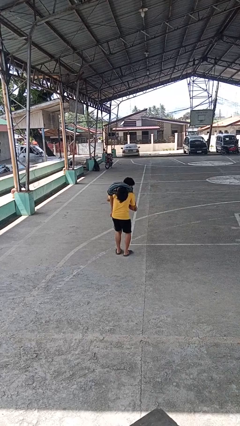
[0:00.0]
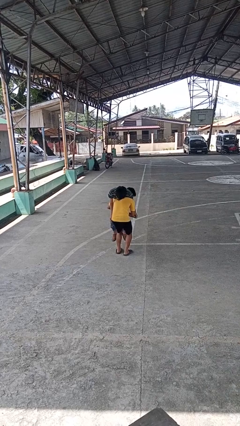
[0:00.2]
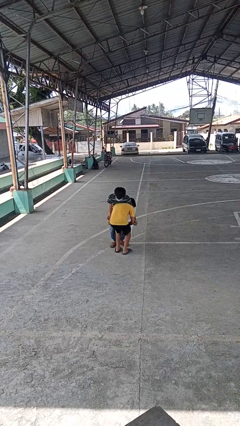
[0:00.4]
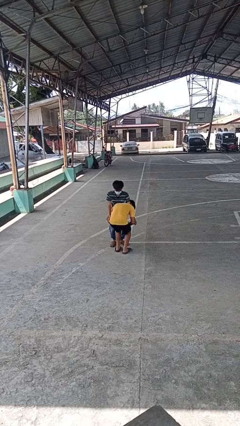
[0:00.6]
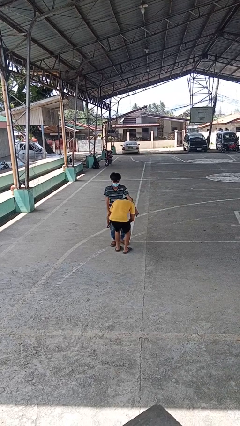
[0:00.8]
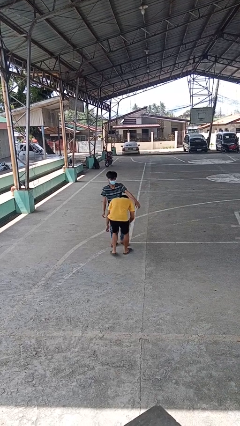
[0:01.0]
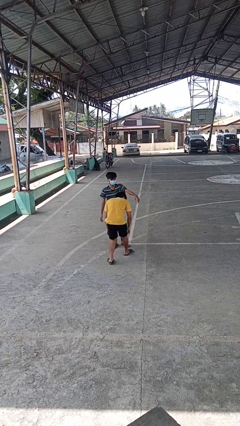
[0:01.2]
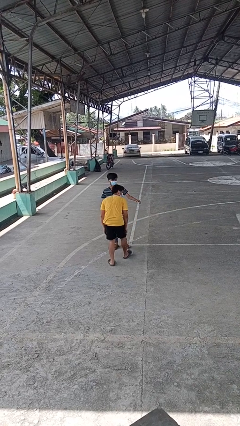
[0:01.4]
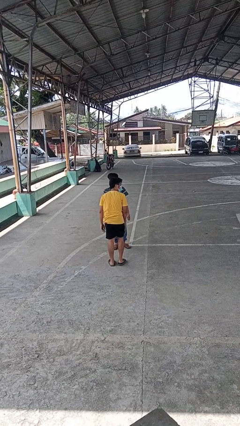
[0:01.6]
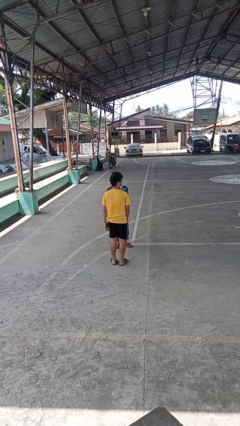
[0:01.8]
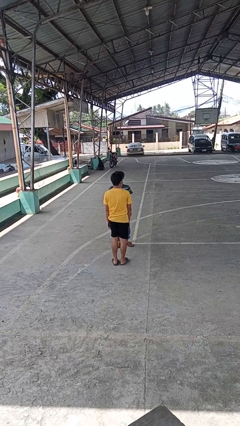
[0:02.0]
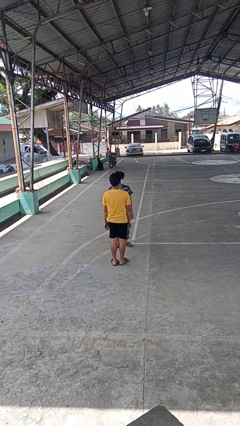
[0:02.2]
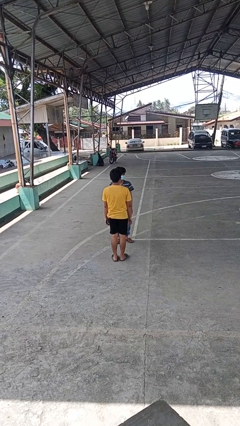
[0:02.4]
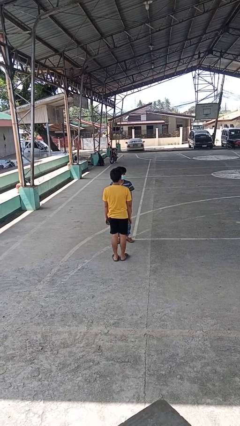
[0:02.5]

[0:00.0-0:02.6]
person puts down person

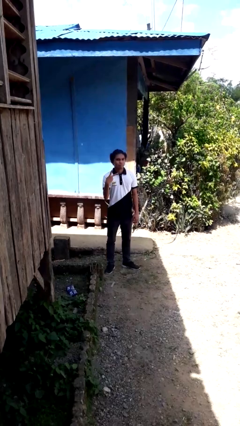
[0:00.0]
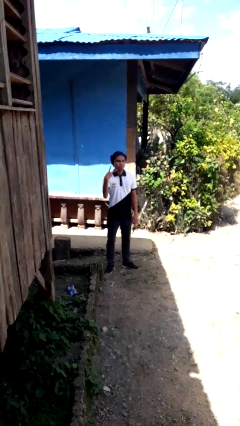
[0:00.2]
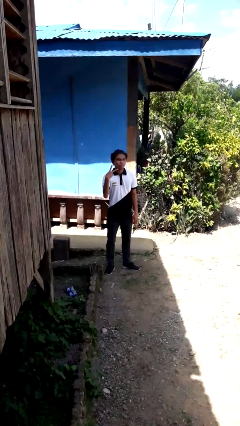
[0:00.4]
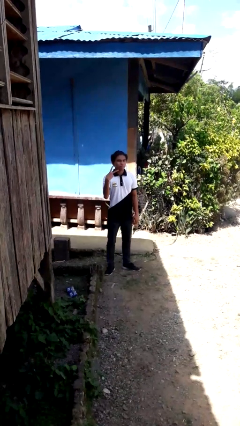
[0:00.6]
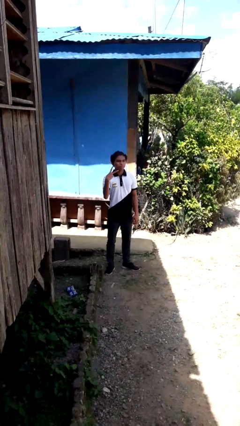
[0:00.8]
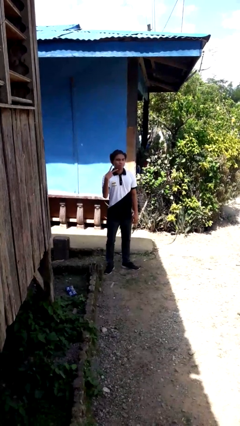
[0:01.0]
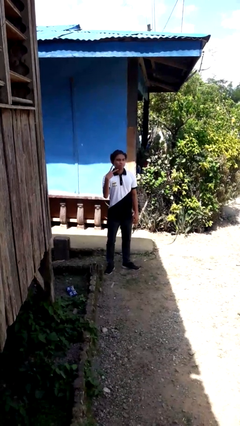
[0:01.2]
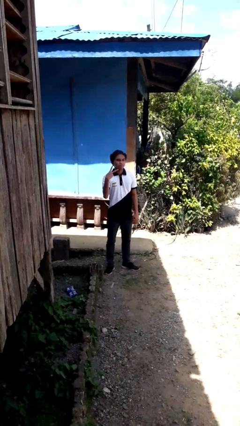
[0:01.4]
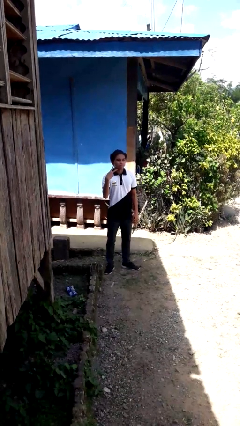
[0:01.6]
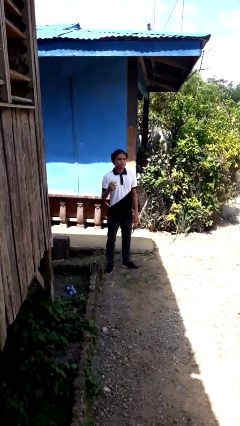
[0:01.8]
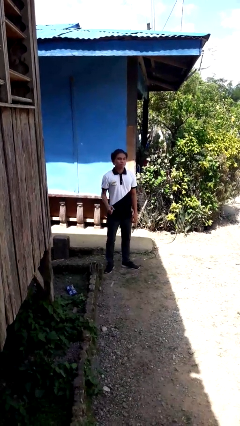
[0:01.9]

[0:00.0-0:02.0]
person gestures peace

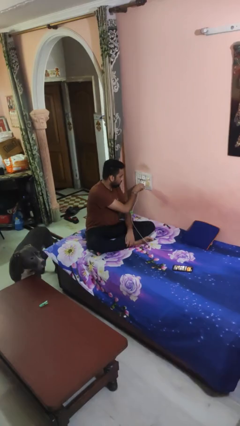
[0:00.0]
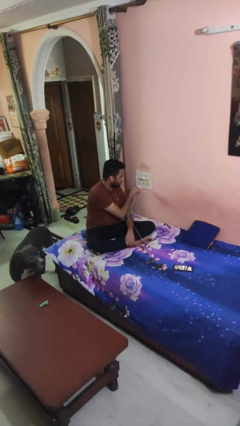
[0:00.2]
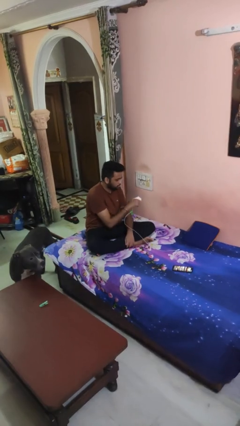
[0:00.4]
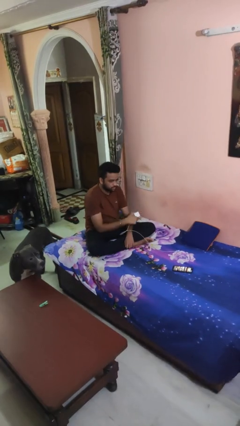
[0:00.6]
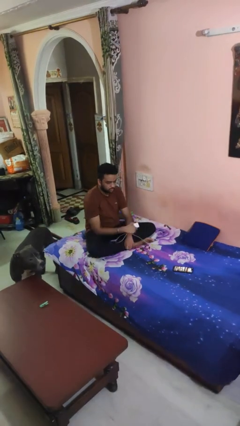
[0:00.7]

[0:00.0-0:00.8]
person unplugs from electrical socket

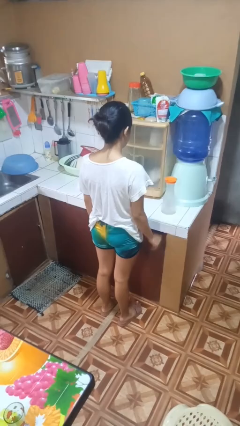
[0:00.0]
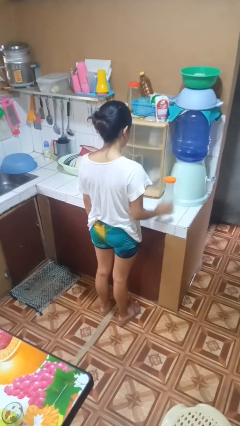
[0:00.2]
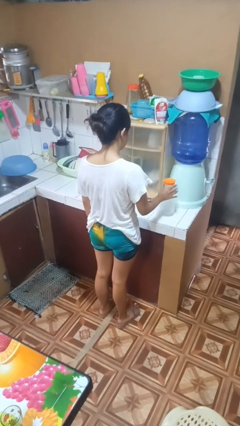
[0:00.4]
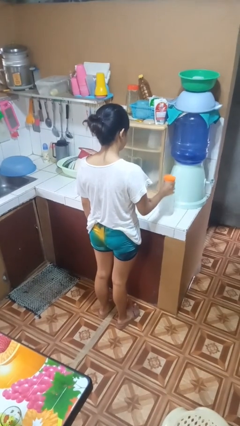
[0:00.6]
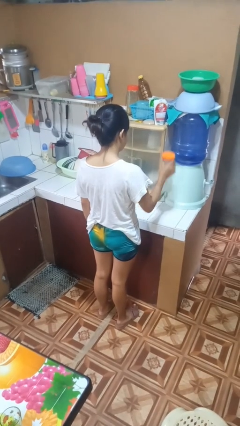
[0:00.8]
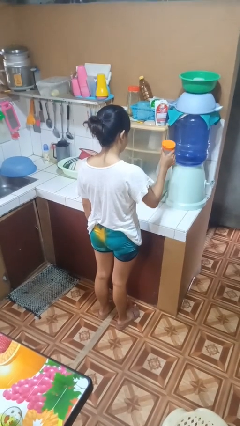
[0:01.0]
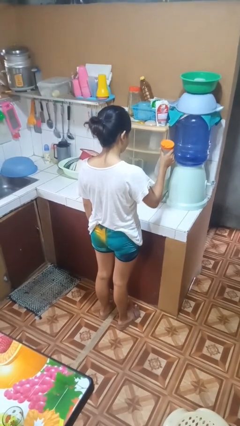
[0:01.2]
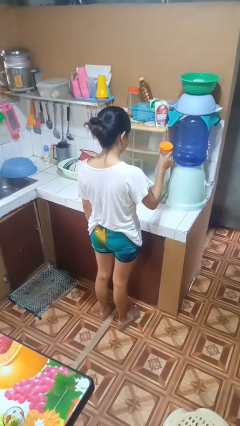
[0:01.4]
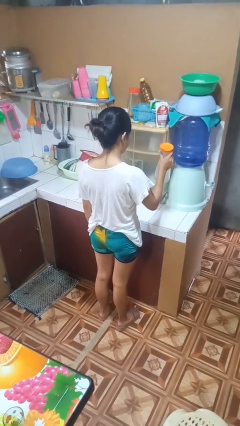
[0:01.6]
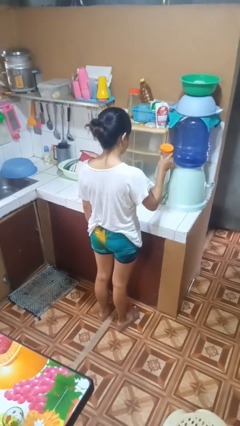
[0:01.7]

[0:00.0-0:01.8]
person picks up object from countertop

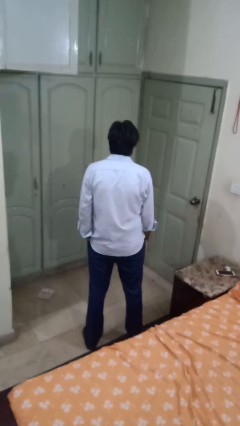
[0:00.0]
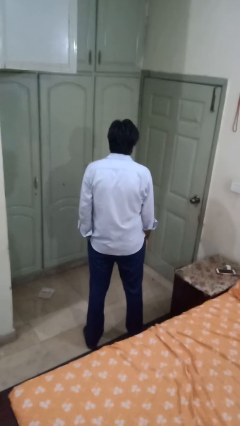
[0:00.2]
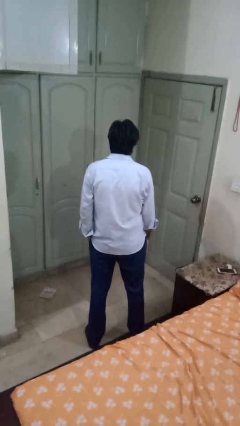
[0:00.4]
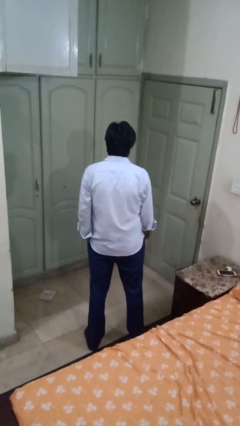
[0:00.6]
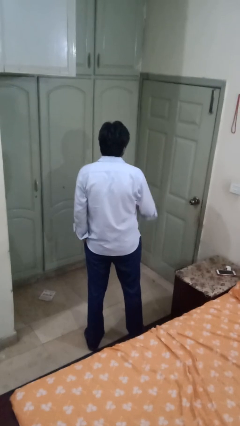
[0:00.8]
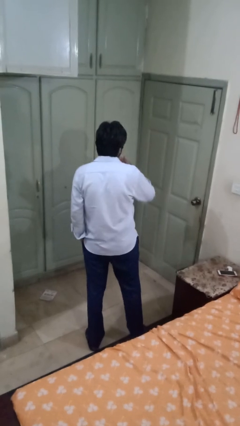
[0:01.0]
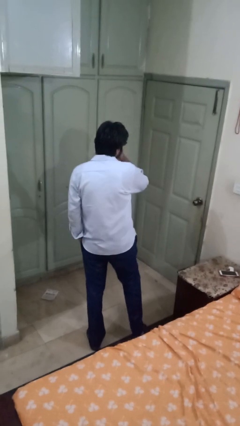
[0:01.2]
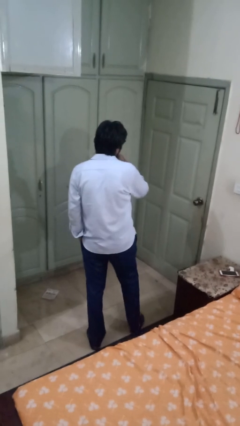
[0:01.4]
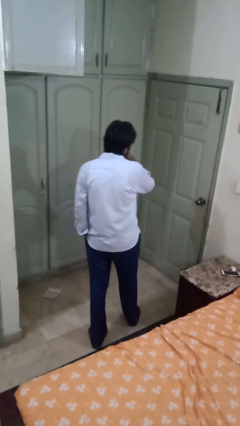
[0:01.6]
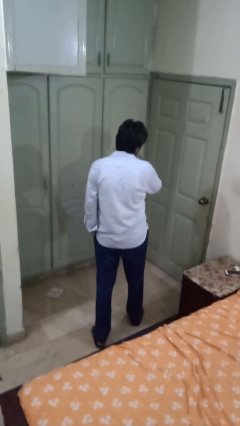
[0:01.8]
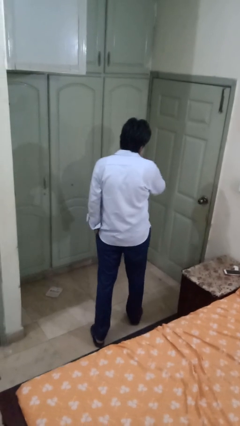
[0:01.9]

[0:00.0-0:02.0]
person strokes chin

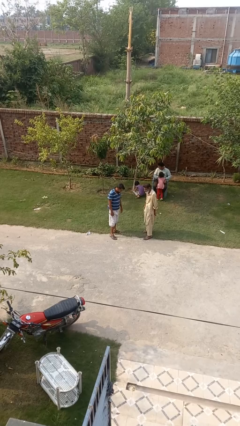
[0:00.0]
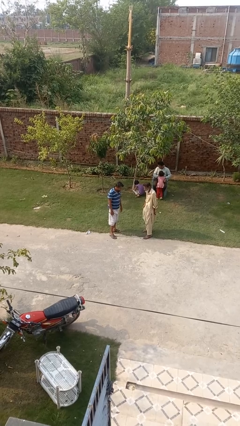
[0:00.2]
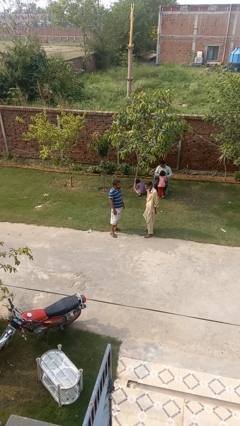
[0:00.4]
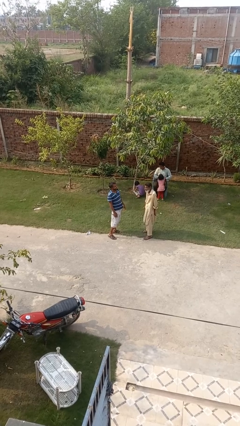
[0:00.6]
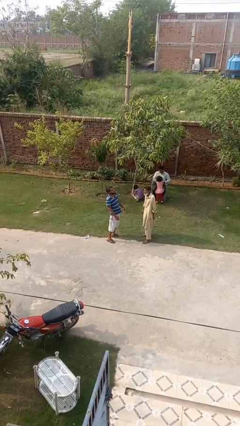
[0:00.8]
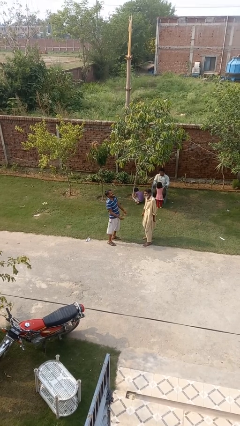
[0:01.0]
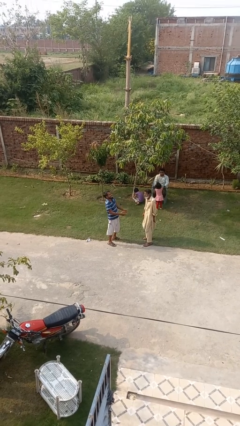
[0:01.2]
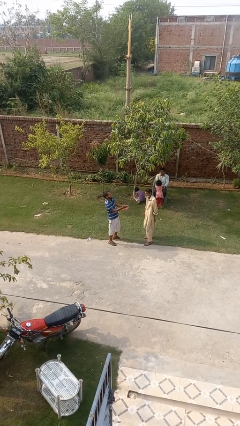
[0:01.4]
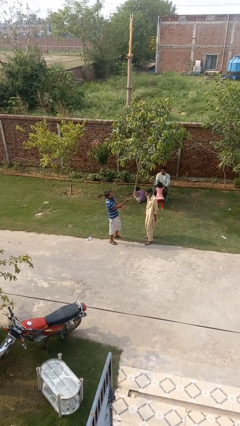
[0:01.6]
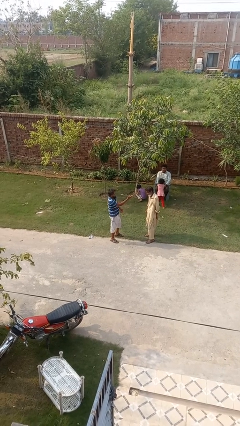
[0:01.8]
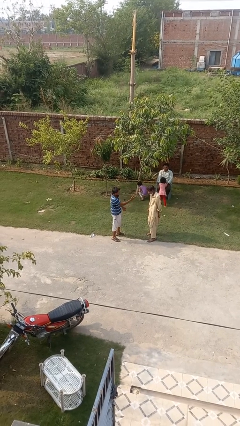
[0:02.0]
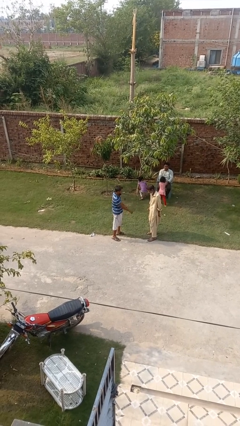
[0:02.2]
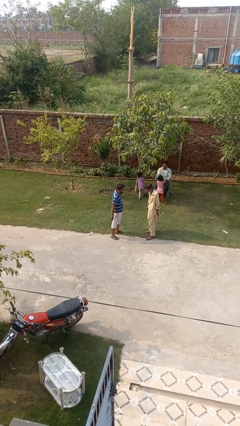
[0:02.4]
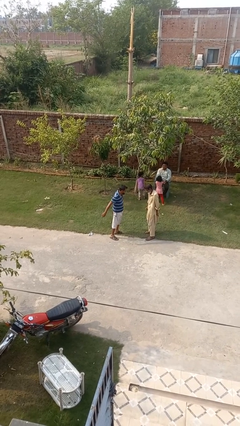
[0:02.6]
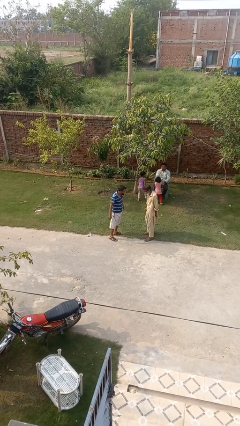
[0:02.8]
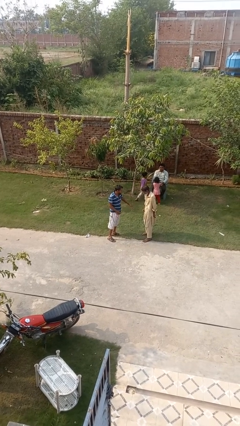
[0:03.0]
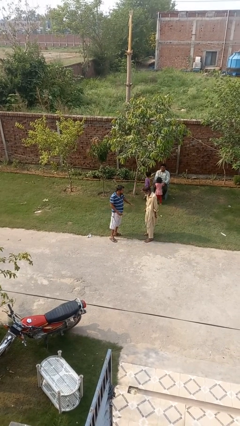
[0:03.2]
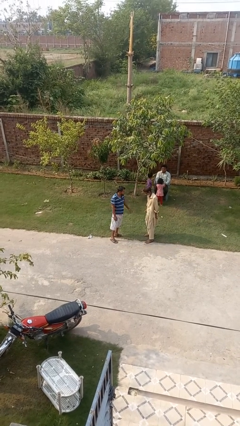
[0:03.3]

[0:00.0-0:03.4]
person laughs with person

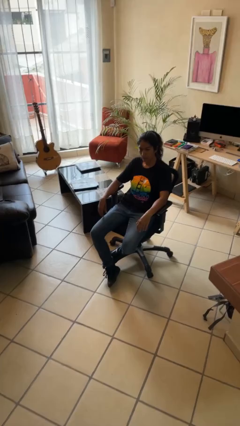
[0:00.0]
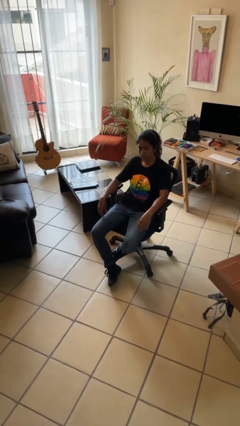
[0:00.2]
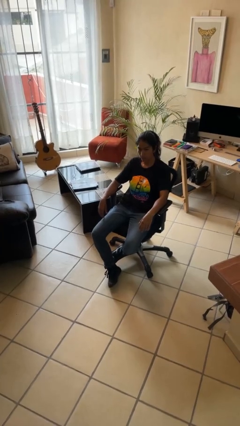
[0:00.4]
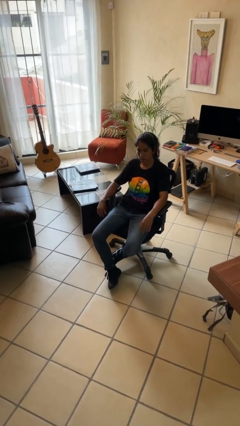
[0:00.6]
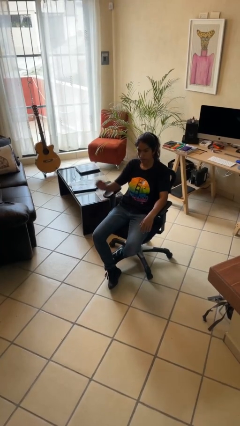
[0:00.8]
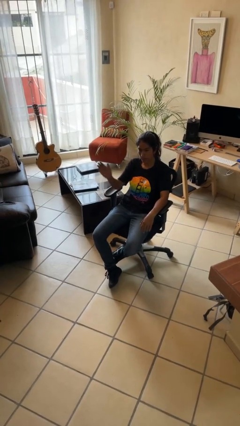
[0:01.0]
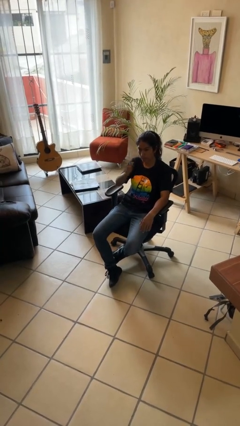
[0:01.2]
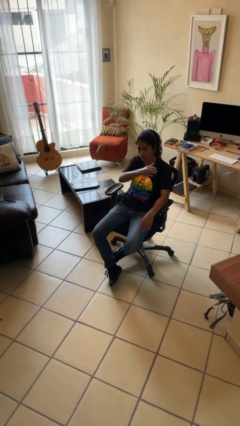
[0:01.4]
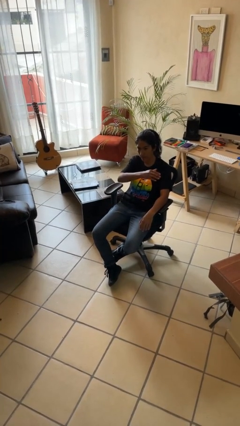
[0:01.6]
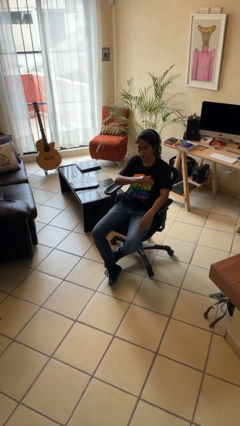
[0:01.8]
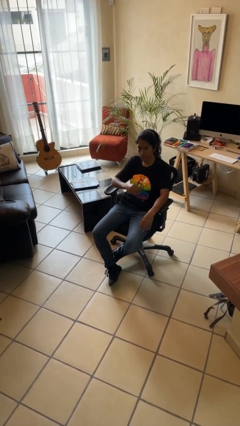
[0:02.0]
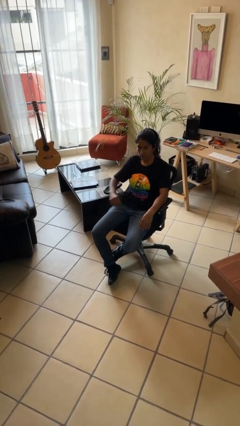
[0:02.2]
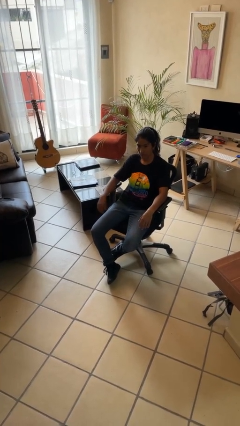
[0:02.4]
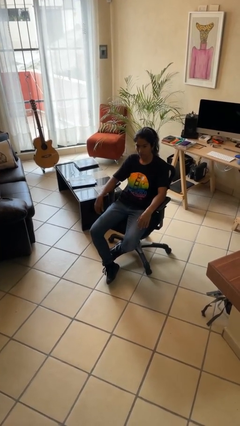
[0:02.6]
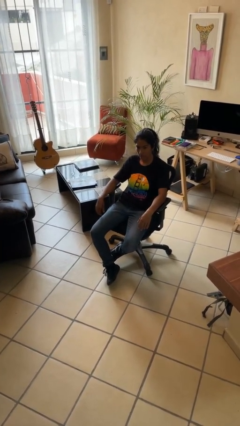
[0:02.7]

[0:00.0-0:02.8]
person gestures swipe left

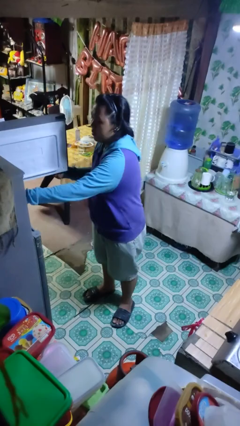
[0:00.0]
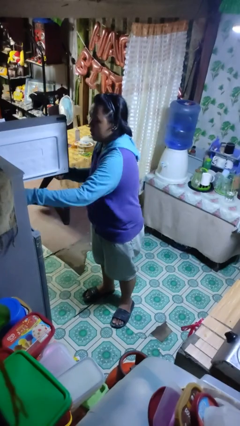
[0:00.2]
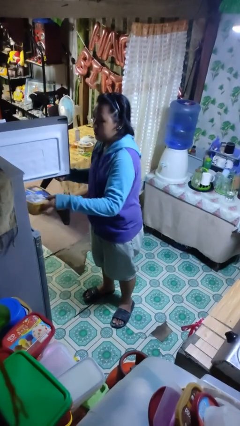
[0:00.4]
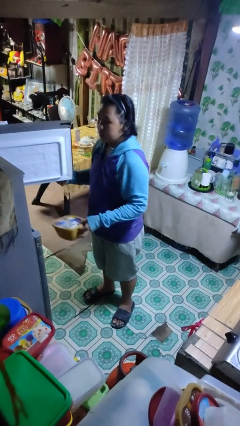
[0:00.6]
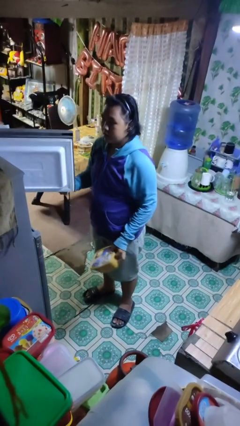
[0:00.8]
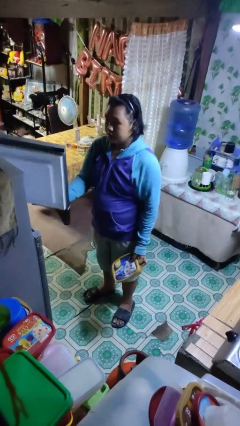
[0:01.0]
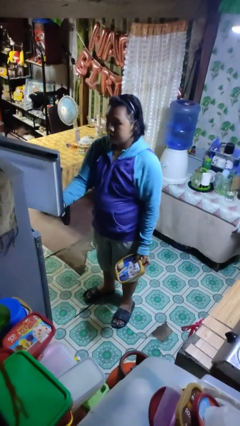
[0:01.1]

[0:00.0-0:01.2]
person takes object from refrigerator
